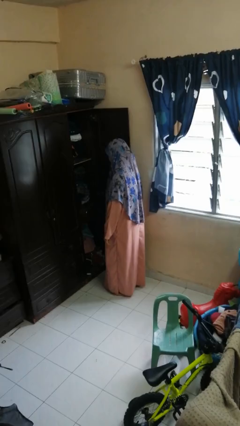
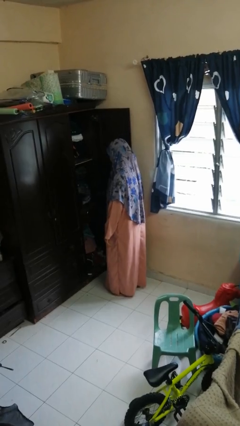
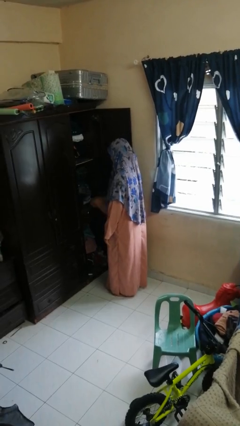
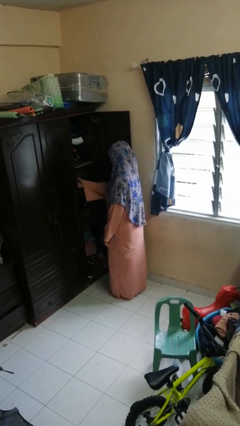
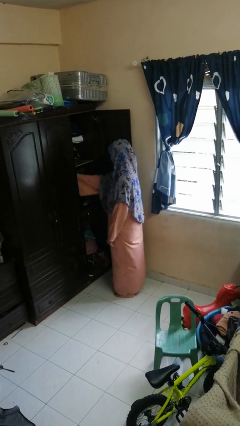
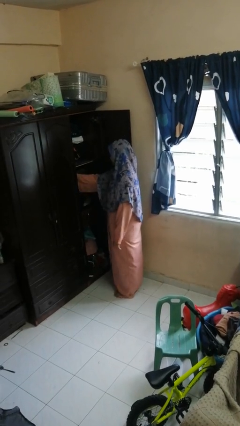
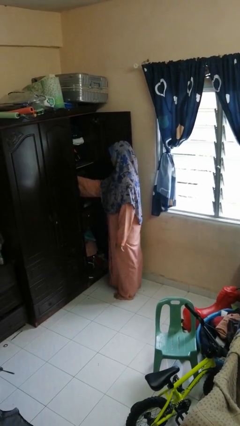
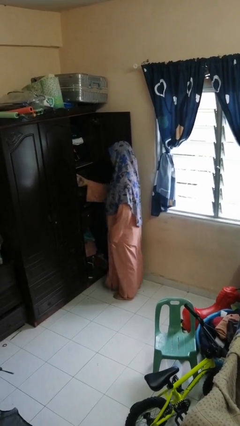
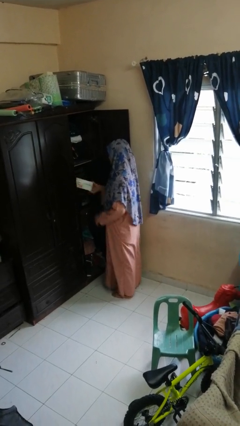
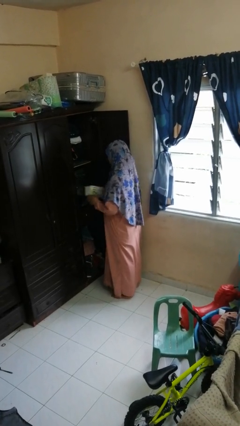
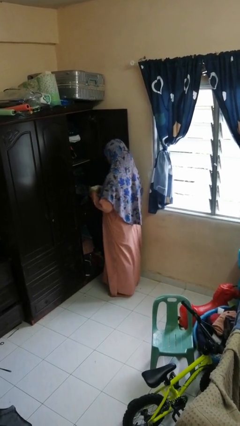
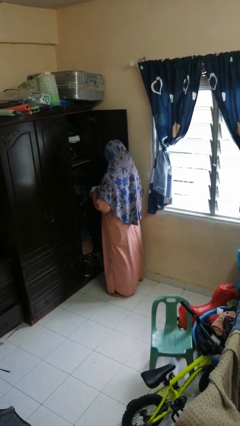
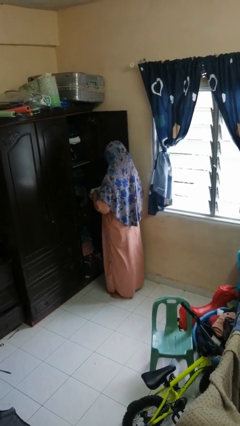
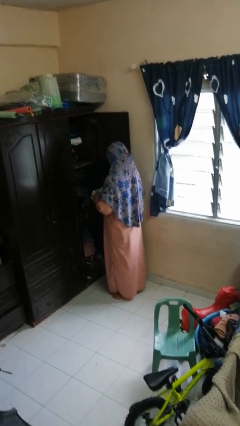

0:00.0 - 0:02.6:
person picks up object from cabinet

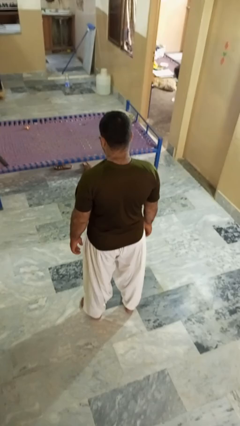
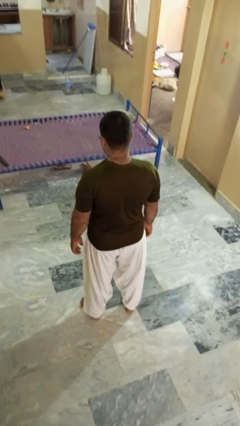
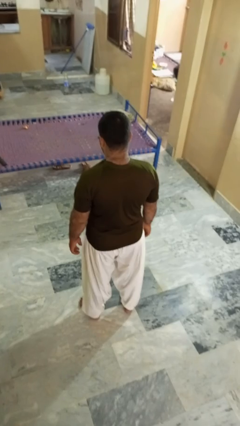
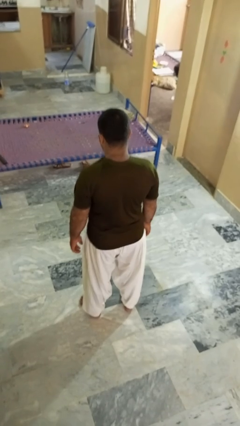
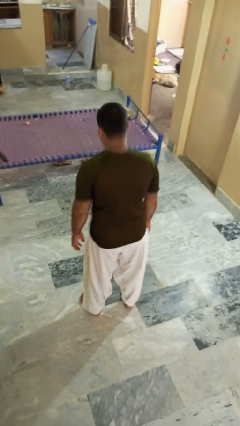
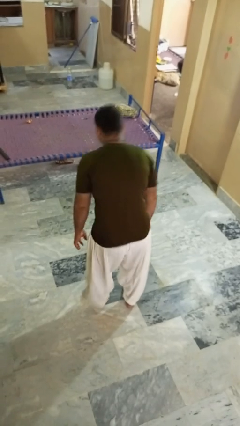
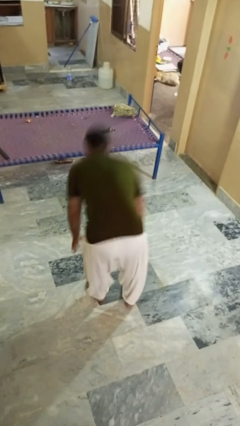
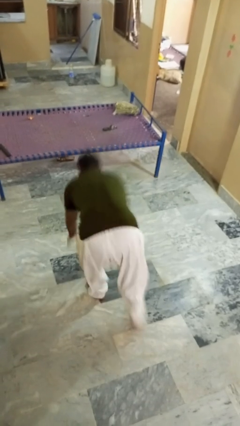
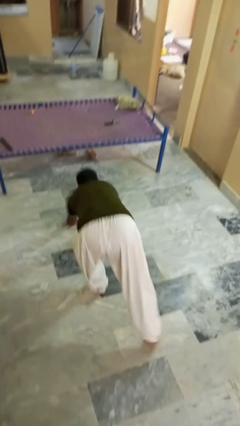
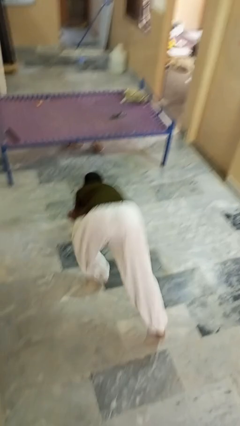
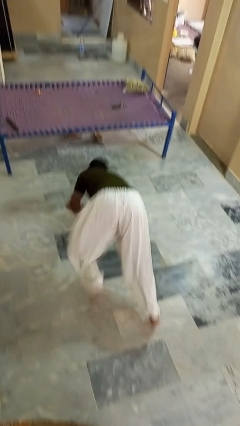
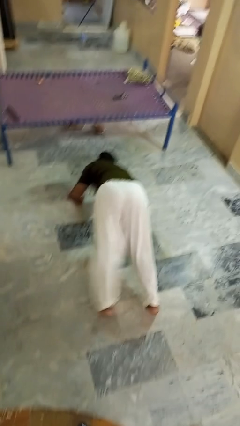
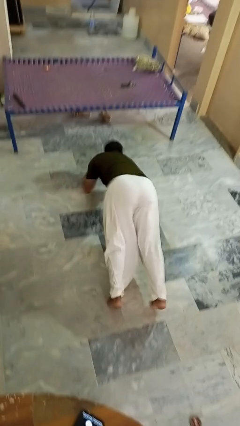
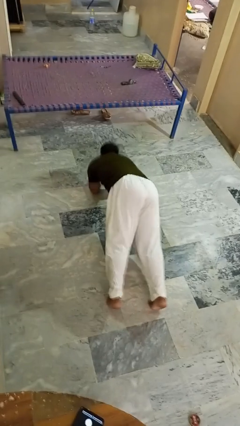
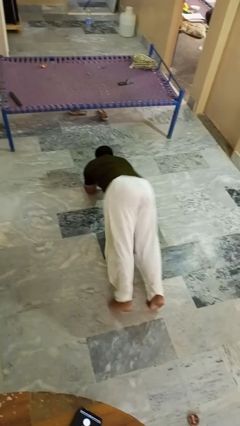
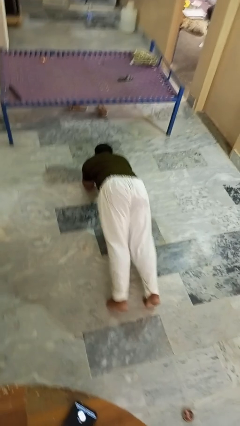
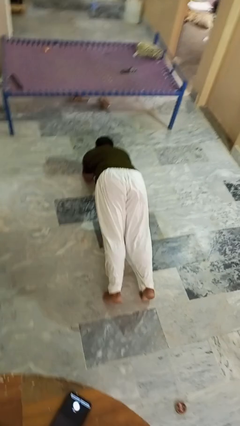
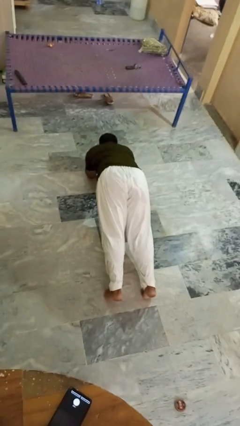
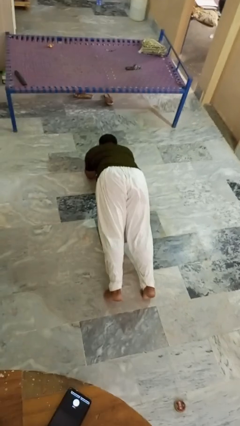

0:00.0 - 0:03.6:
person exercises with plank

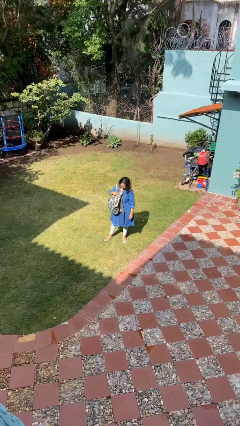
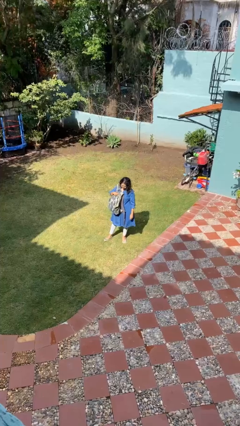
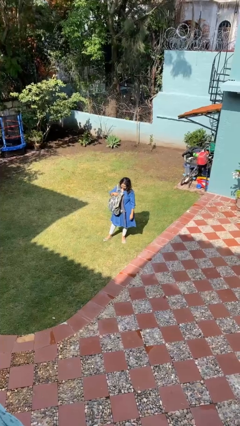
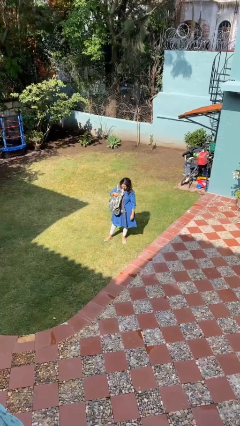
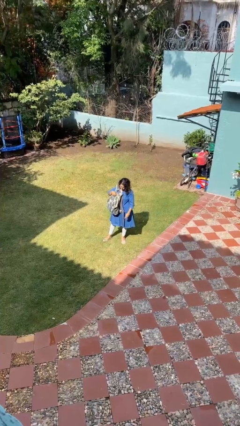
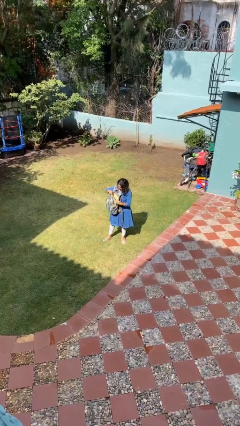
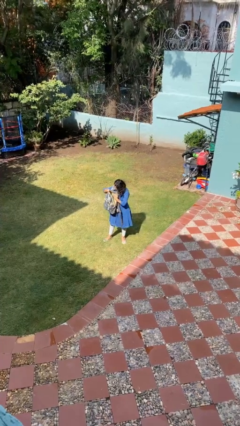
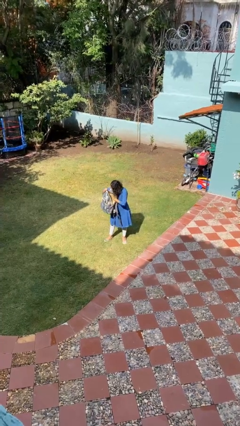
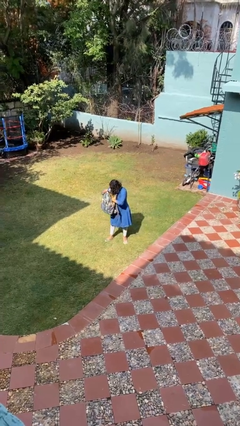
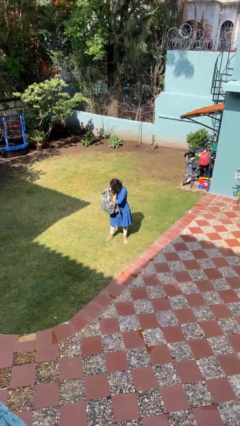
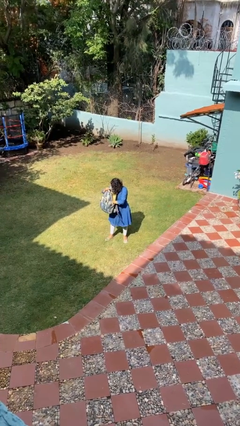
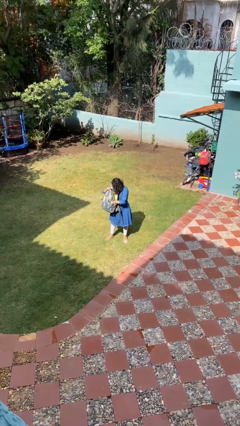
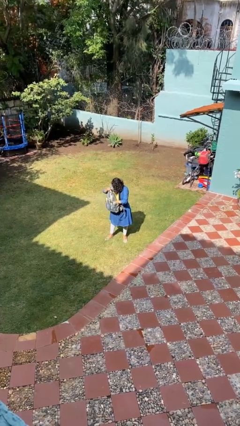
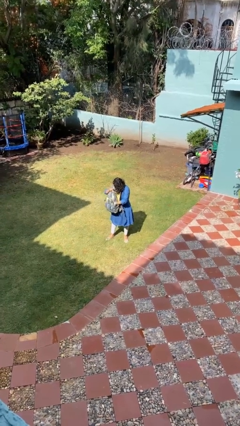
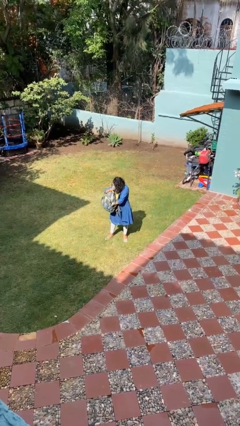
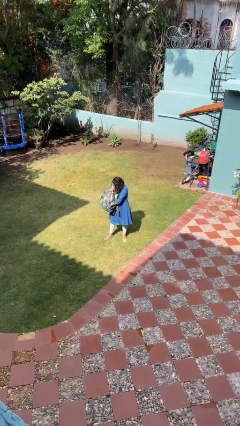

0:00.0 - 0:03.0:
person searches in backpack

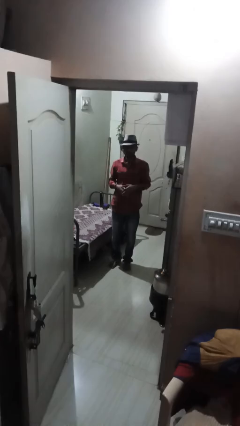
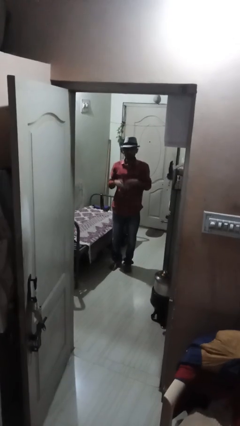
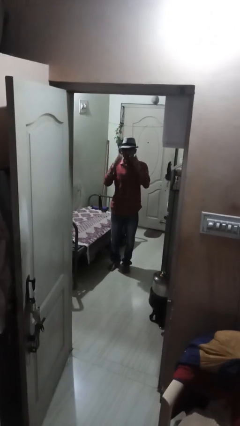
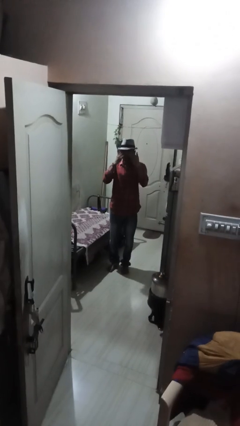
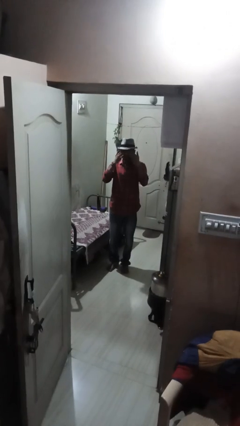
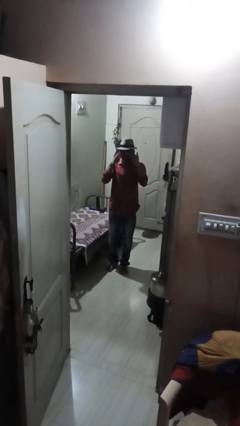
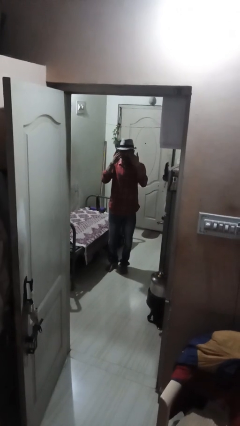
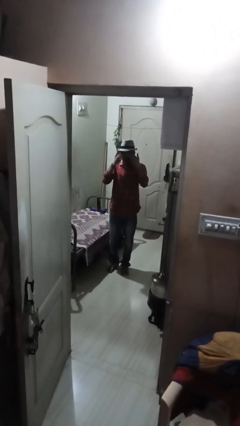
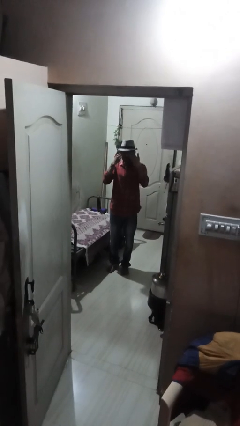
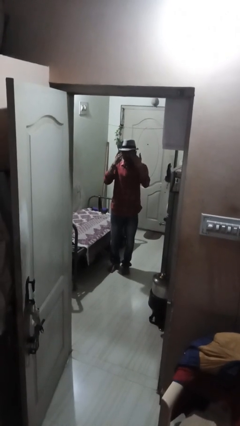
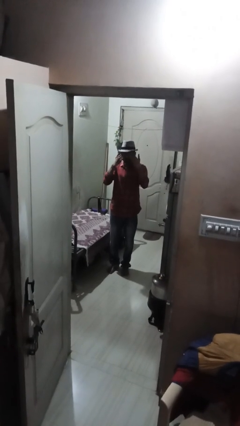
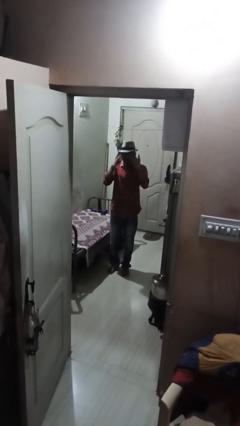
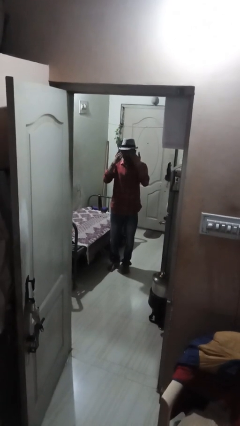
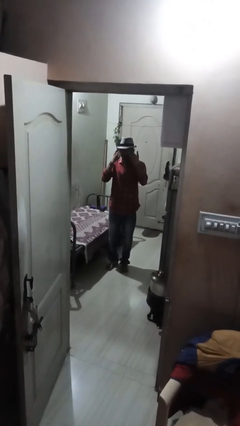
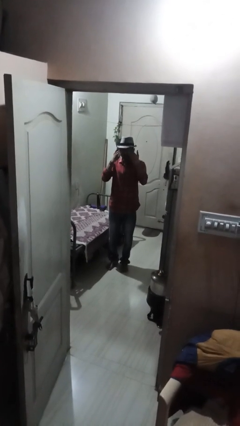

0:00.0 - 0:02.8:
person rubs eyes

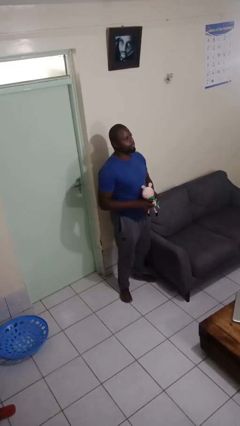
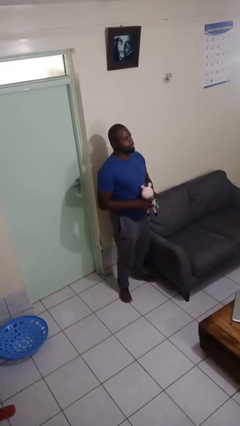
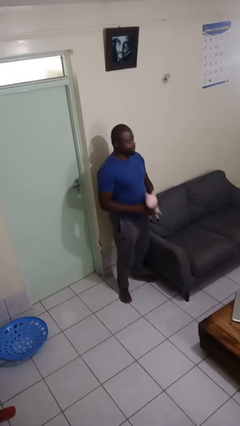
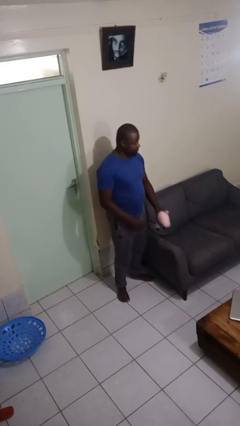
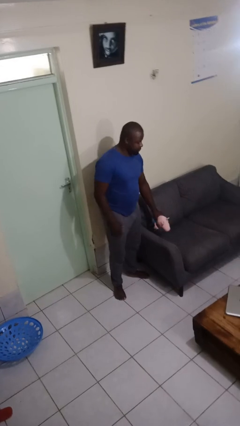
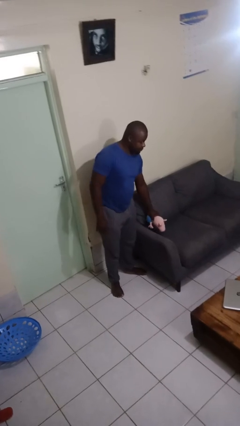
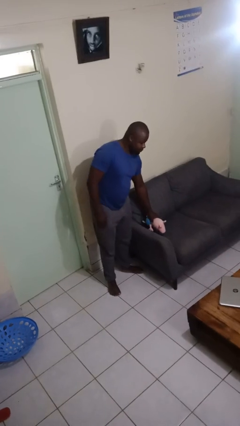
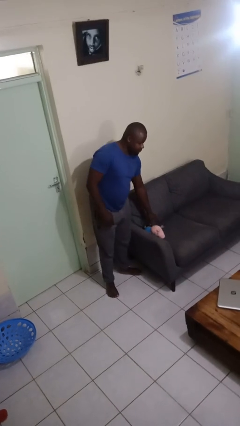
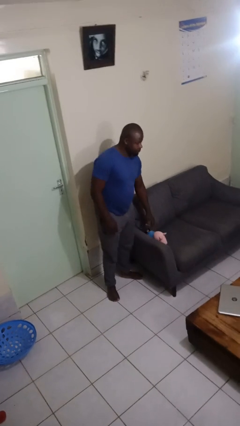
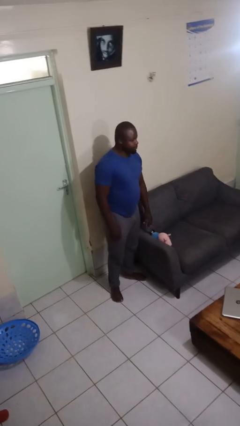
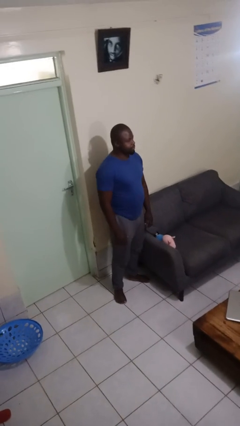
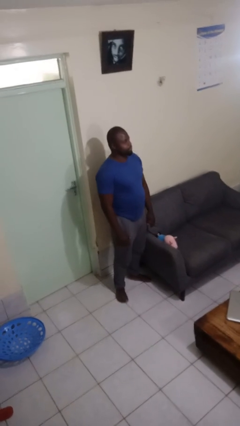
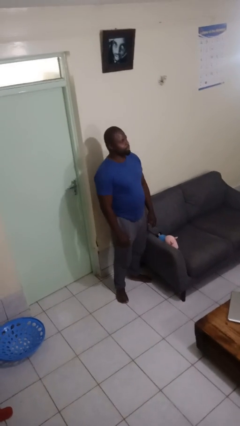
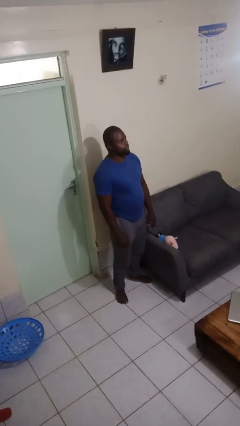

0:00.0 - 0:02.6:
person puts down object on couch

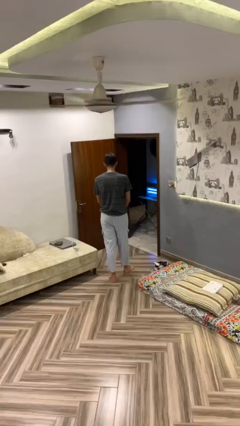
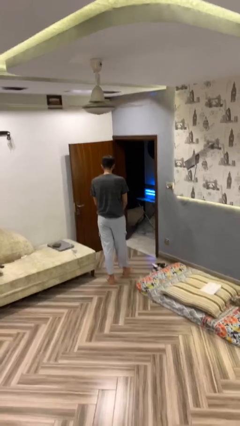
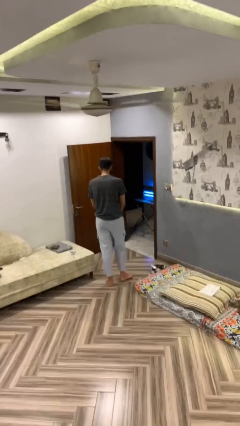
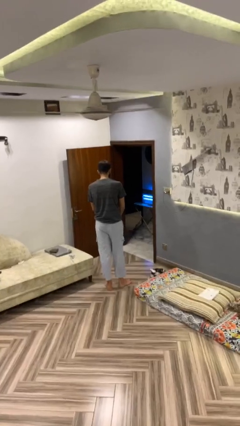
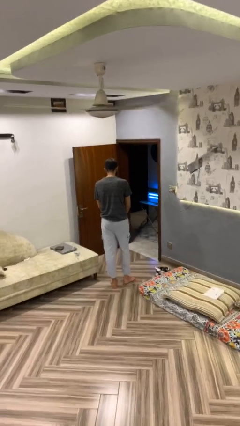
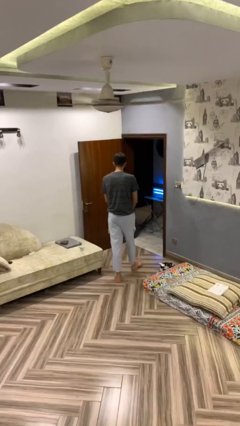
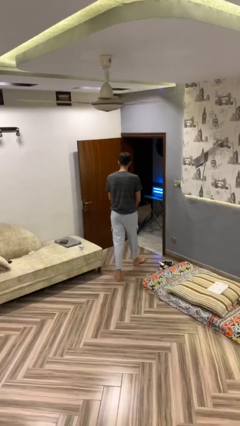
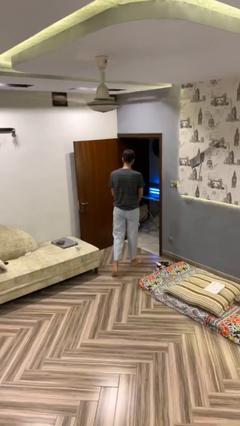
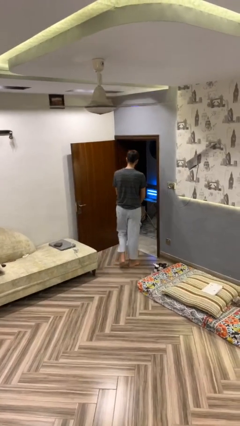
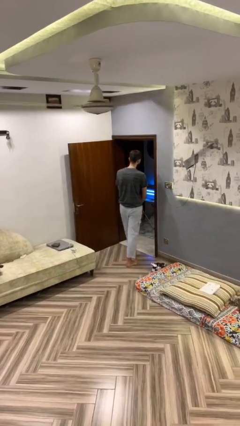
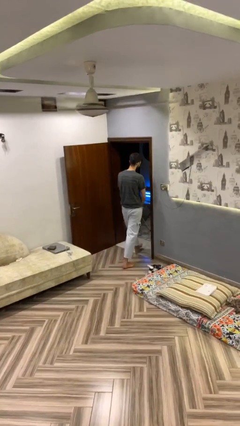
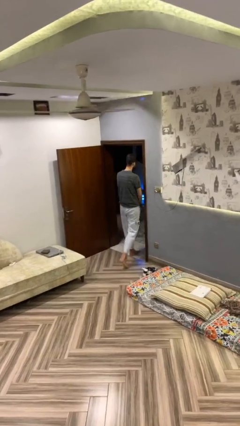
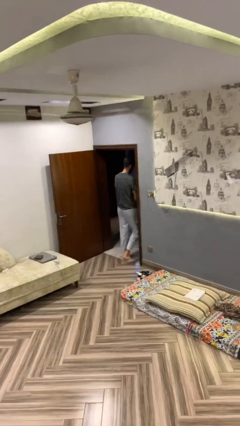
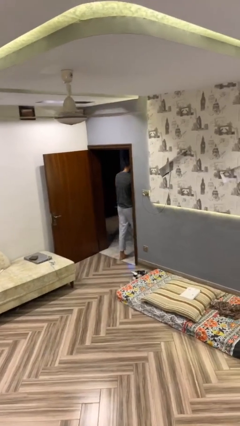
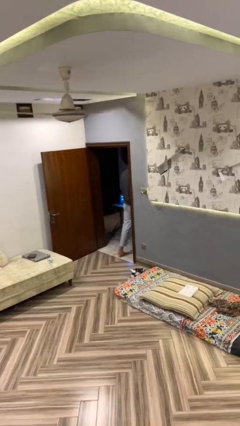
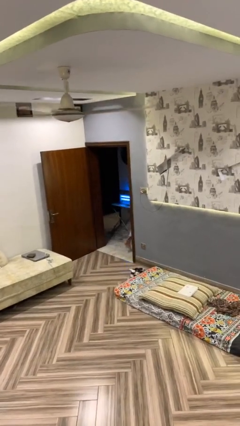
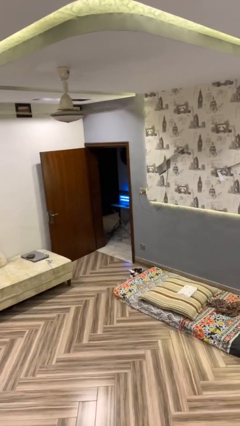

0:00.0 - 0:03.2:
person exits scene through structure
